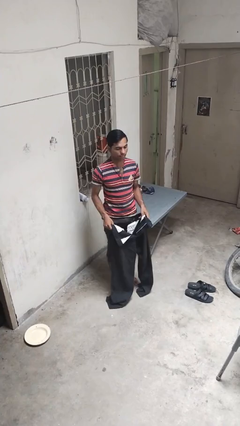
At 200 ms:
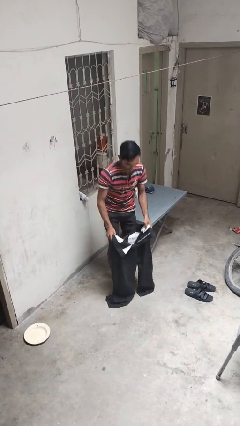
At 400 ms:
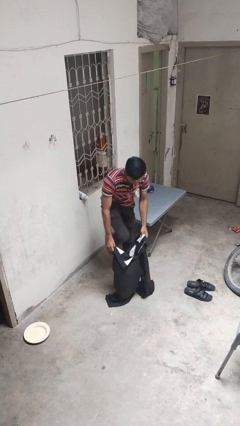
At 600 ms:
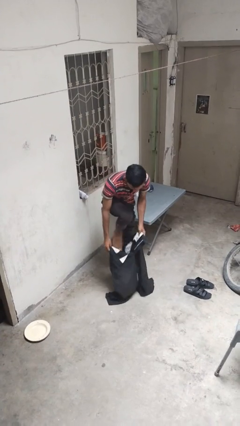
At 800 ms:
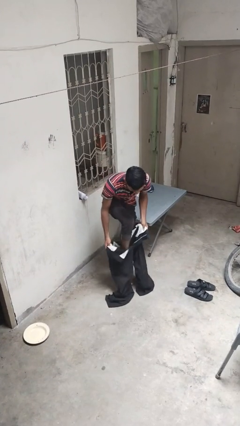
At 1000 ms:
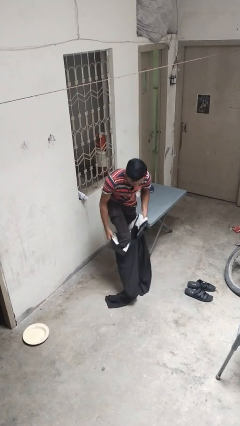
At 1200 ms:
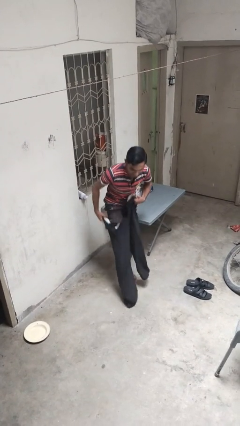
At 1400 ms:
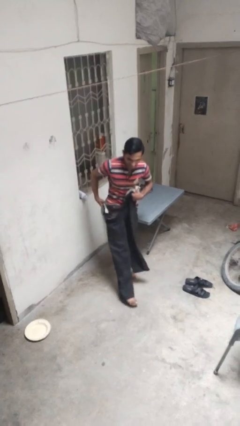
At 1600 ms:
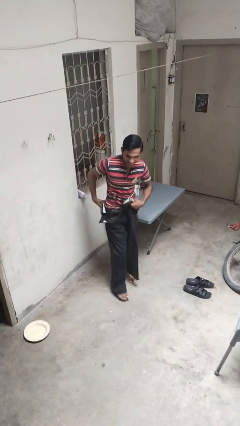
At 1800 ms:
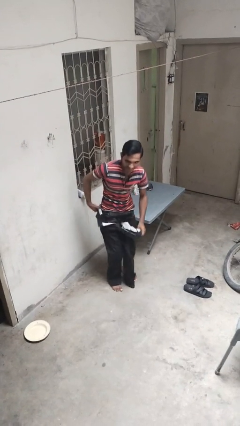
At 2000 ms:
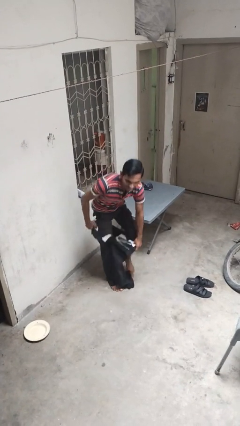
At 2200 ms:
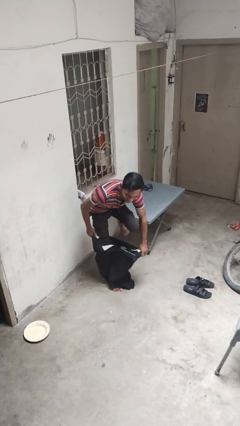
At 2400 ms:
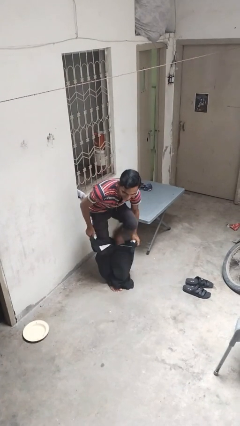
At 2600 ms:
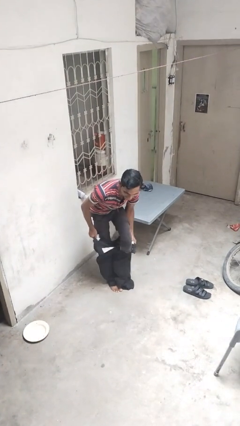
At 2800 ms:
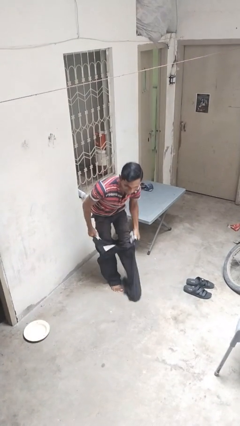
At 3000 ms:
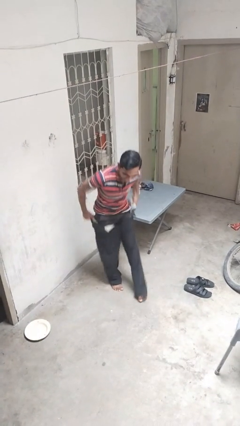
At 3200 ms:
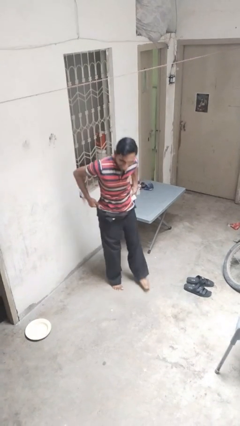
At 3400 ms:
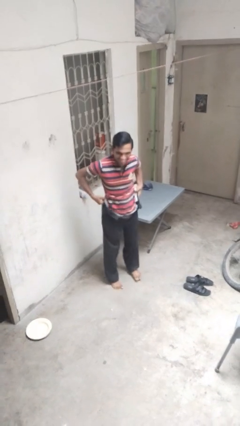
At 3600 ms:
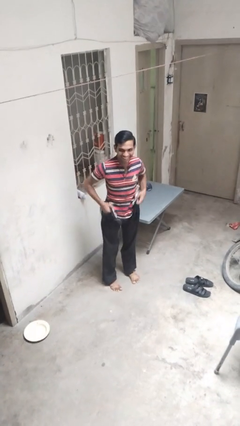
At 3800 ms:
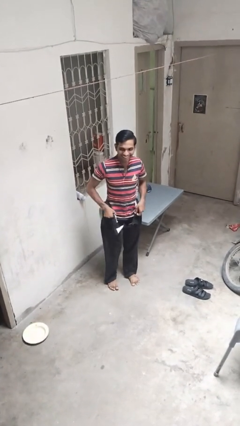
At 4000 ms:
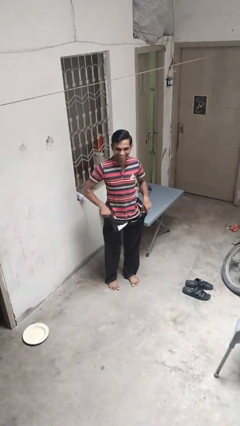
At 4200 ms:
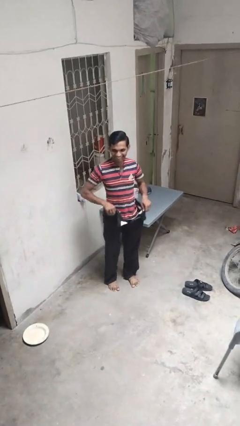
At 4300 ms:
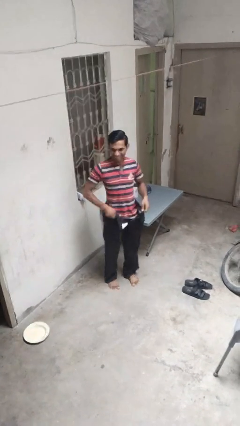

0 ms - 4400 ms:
person puts on pants

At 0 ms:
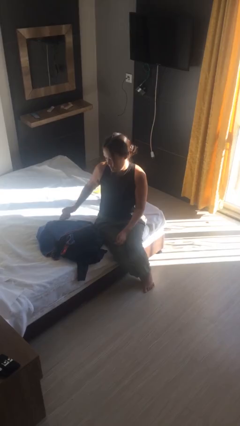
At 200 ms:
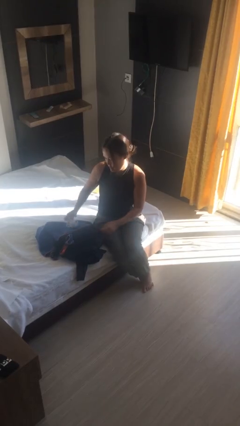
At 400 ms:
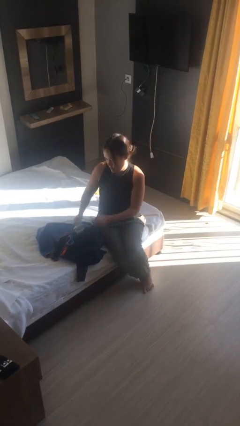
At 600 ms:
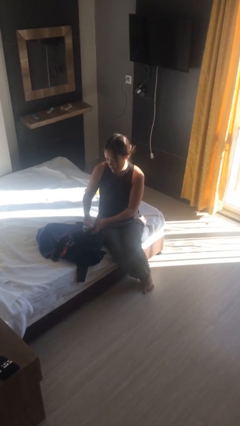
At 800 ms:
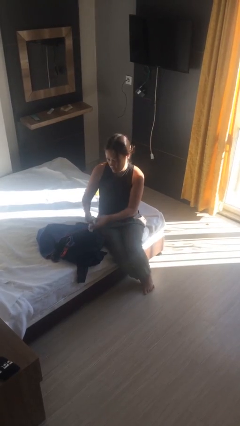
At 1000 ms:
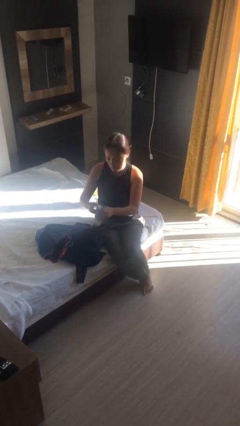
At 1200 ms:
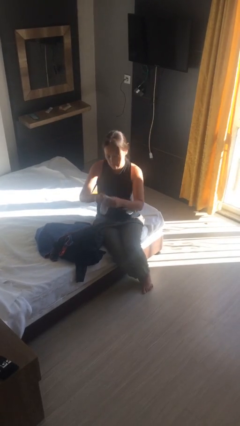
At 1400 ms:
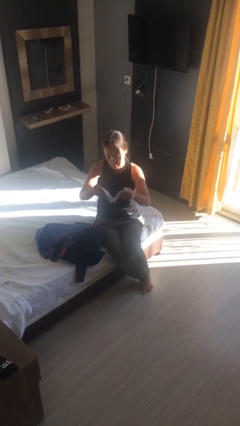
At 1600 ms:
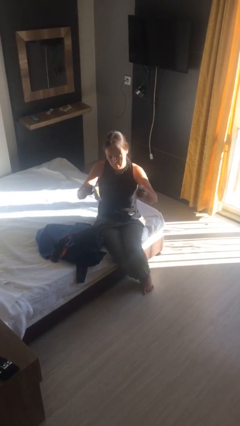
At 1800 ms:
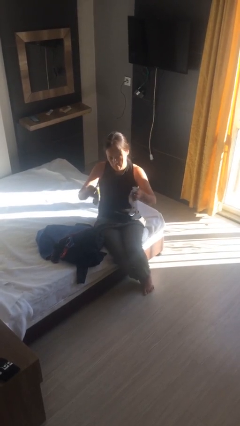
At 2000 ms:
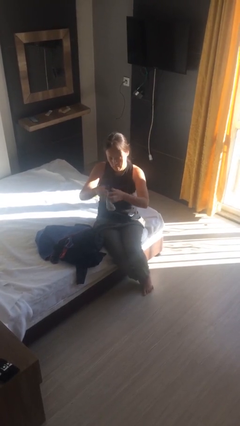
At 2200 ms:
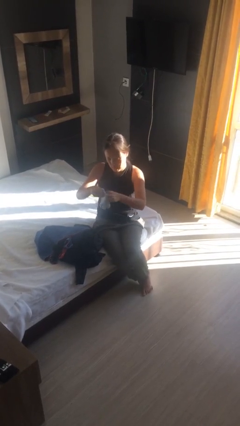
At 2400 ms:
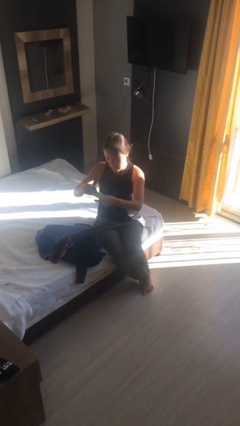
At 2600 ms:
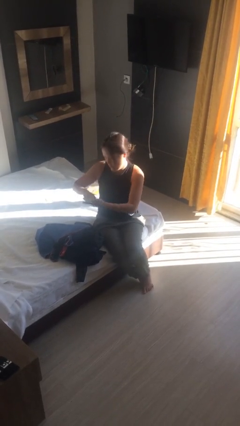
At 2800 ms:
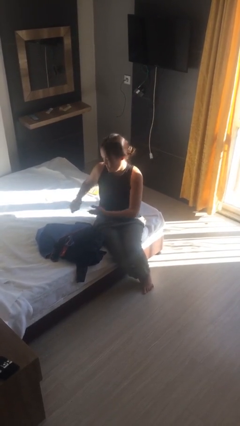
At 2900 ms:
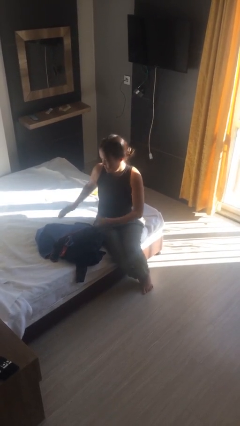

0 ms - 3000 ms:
person folds shirt

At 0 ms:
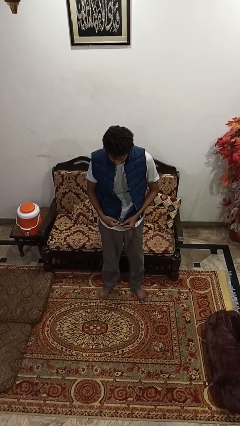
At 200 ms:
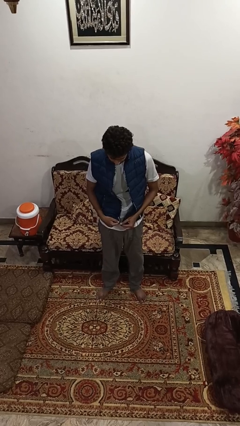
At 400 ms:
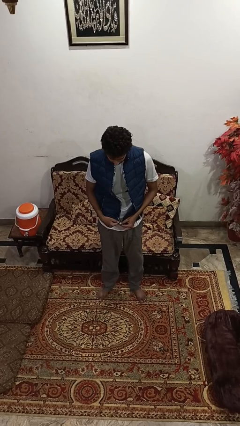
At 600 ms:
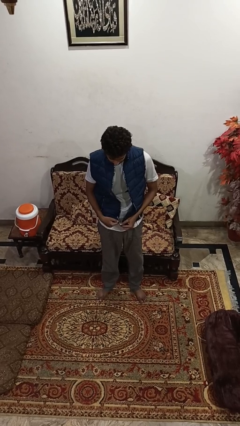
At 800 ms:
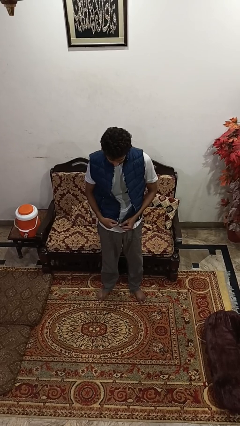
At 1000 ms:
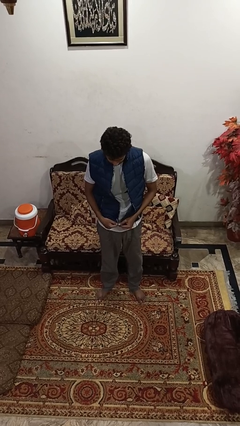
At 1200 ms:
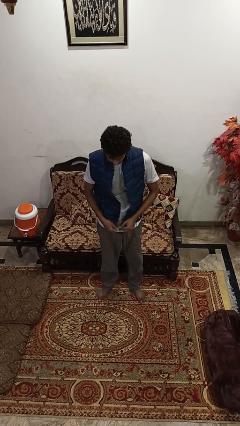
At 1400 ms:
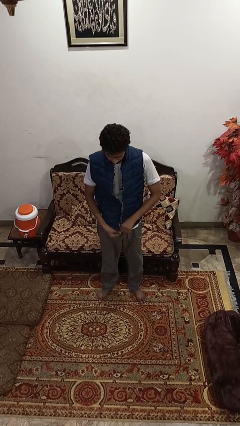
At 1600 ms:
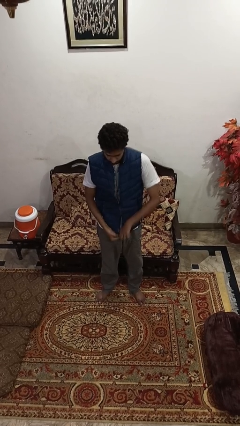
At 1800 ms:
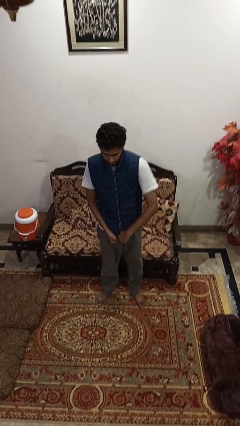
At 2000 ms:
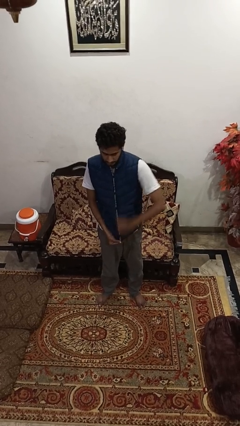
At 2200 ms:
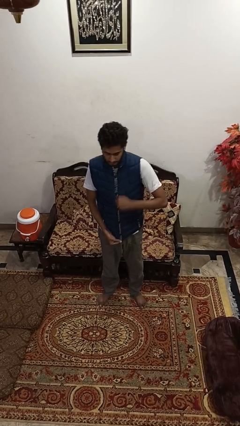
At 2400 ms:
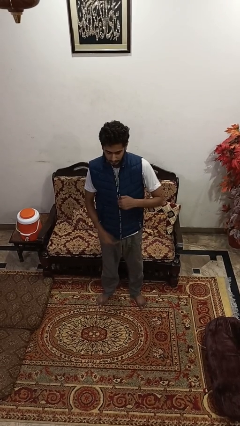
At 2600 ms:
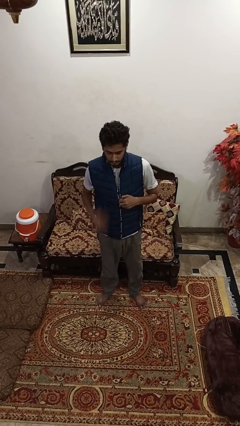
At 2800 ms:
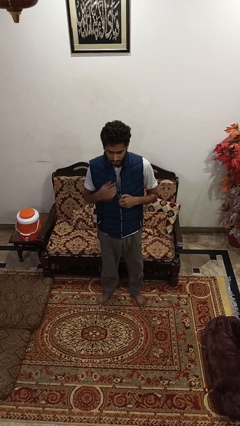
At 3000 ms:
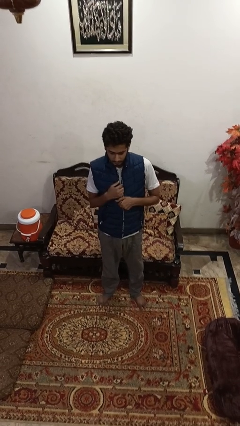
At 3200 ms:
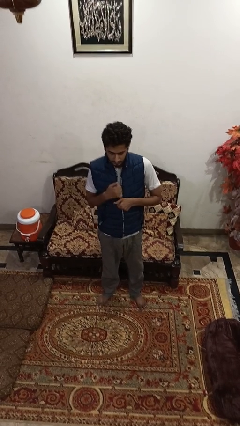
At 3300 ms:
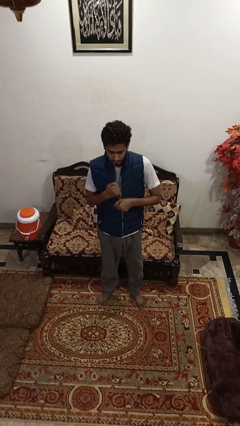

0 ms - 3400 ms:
person zips up jacket

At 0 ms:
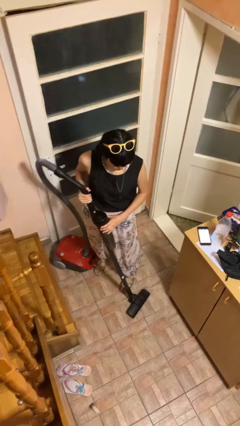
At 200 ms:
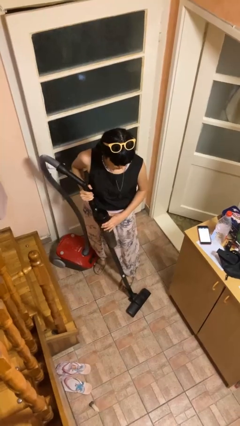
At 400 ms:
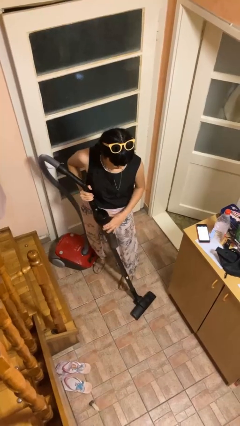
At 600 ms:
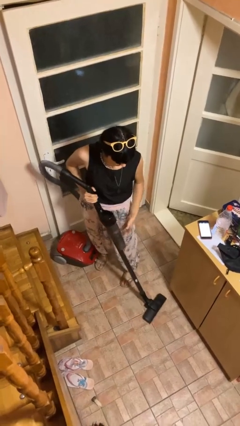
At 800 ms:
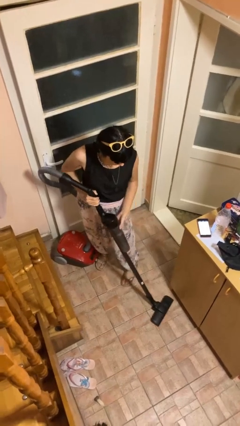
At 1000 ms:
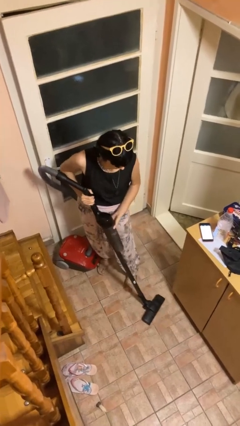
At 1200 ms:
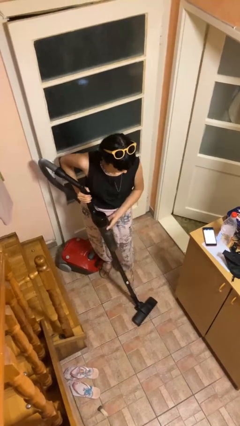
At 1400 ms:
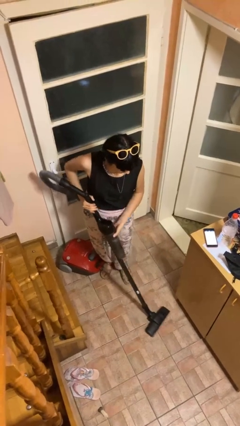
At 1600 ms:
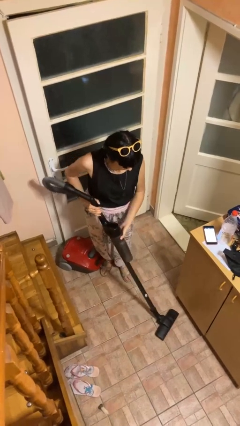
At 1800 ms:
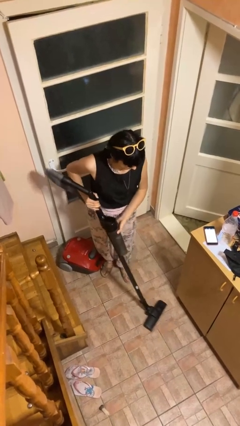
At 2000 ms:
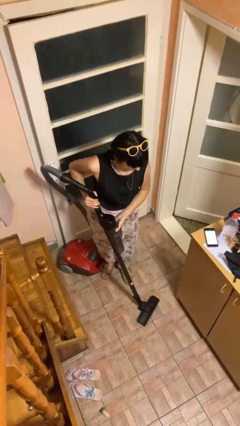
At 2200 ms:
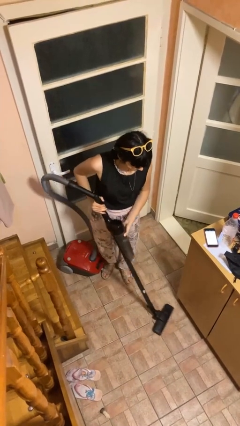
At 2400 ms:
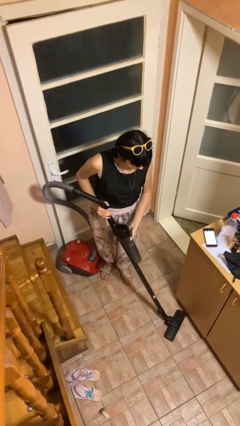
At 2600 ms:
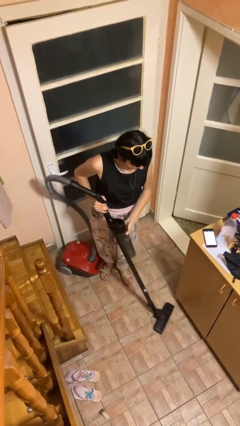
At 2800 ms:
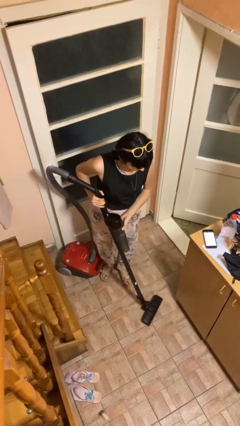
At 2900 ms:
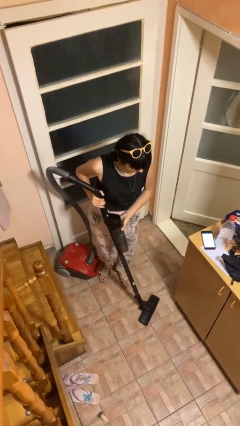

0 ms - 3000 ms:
person vacuums carpet

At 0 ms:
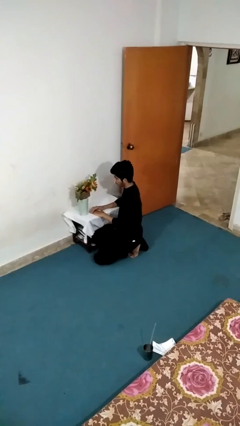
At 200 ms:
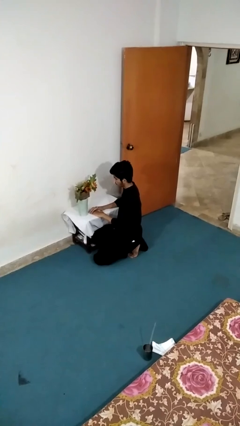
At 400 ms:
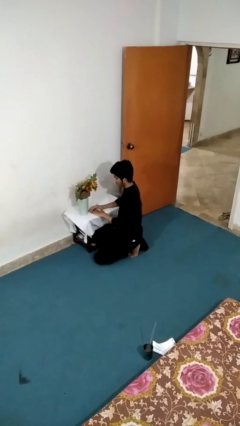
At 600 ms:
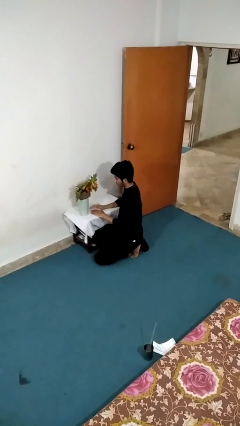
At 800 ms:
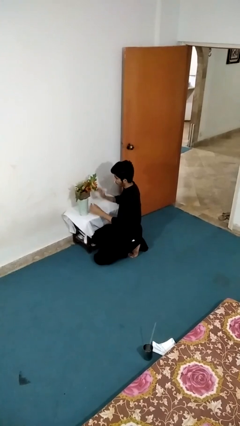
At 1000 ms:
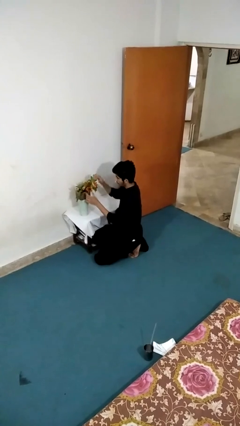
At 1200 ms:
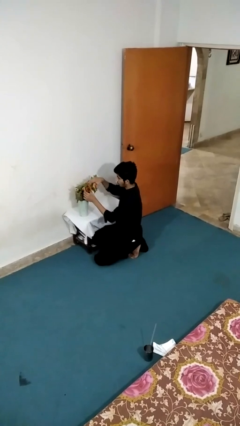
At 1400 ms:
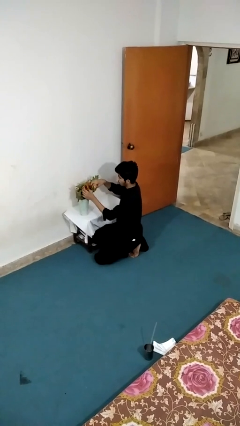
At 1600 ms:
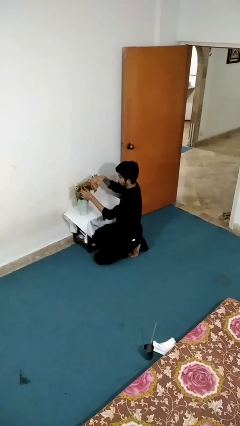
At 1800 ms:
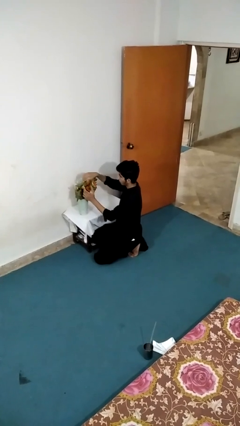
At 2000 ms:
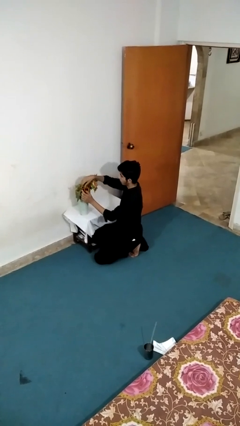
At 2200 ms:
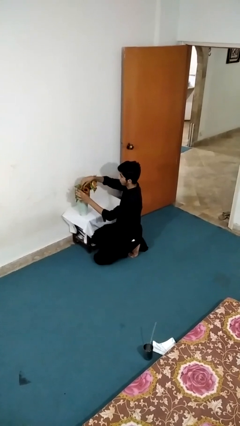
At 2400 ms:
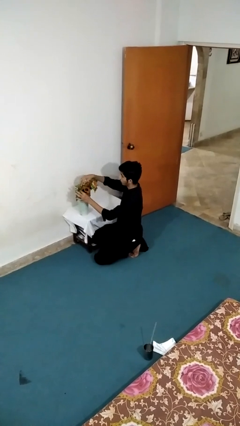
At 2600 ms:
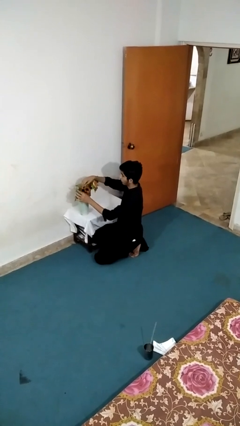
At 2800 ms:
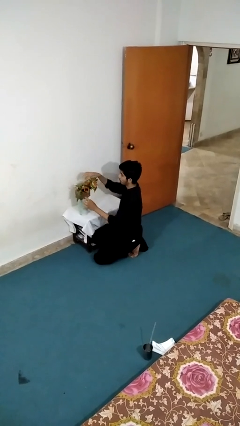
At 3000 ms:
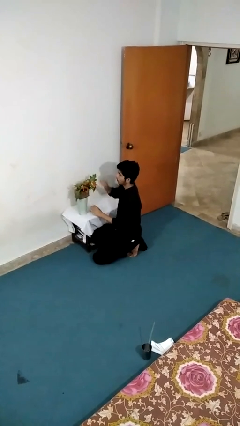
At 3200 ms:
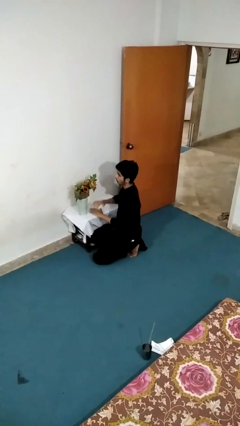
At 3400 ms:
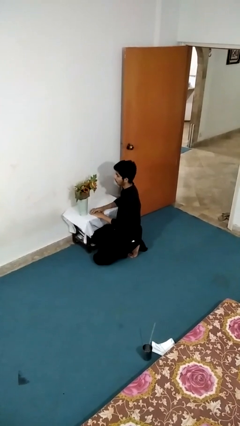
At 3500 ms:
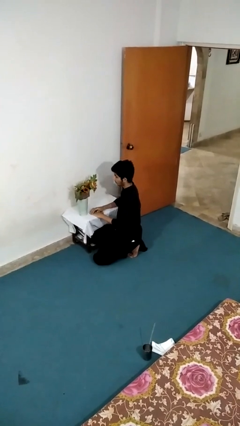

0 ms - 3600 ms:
person arranges flowers in vase
